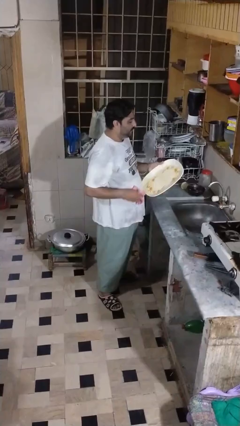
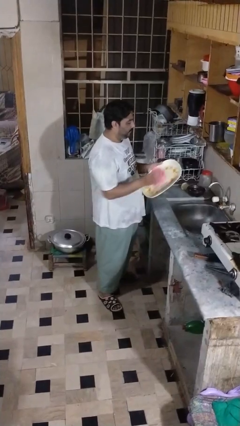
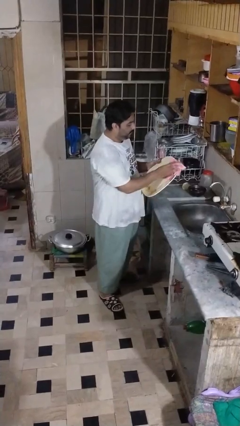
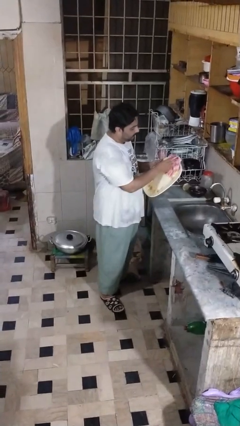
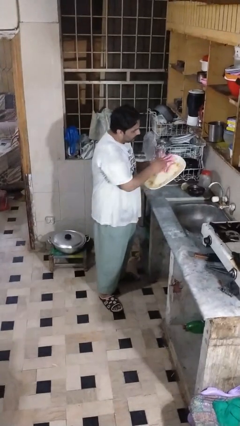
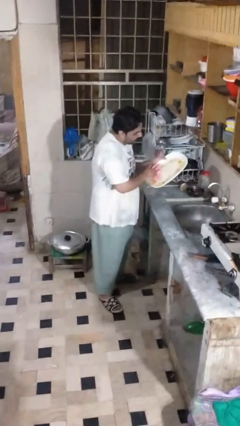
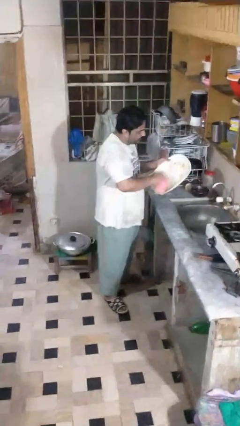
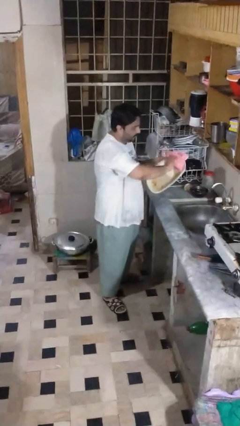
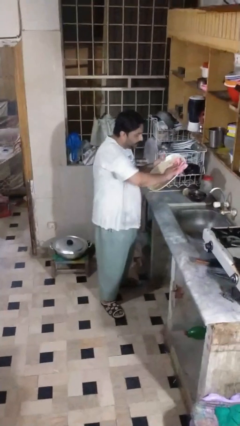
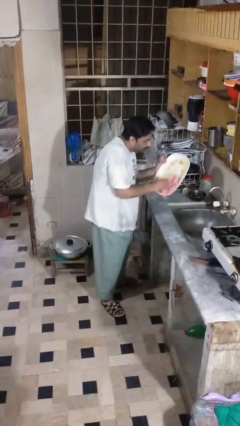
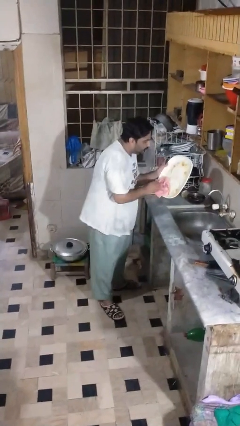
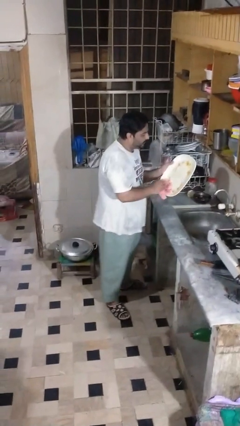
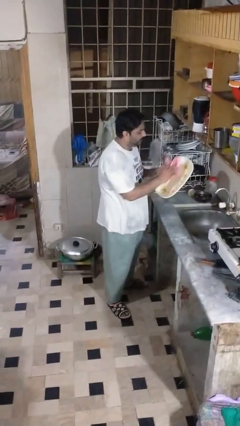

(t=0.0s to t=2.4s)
person dries dish

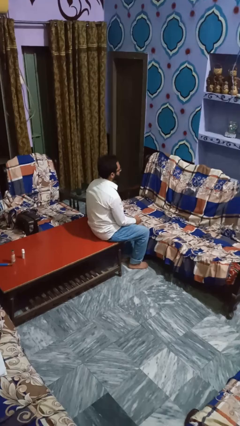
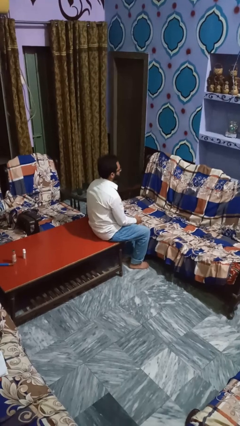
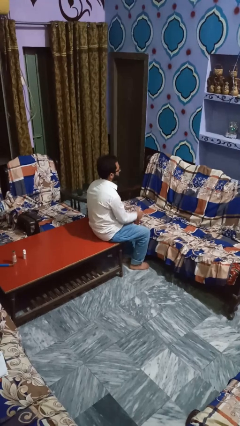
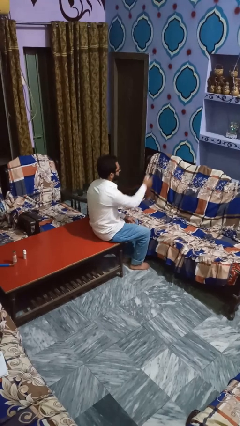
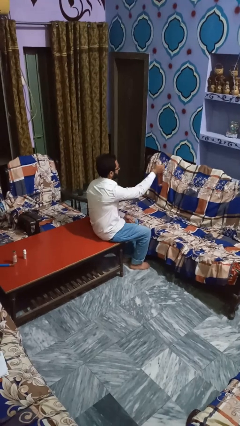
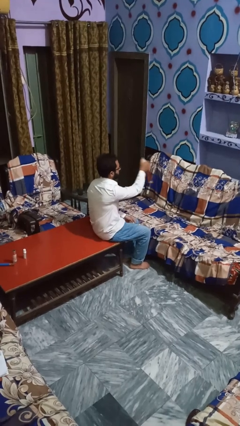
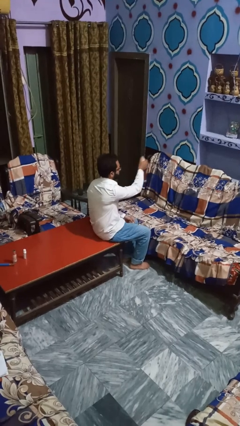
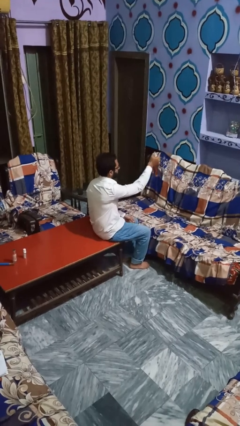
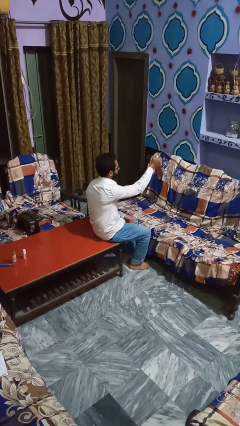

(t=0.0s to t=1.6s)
person sprays from bottle

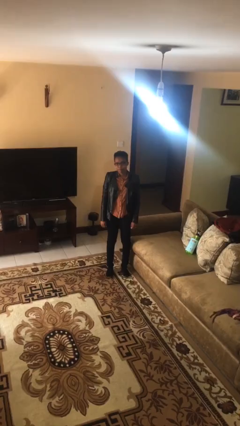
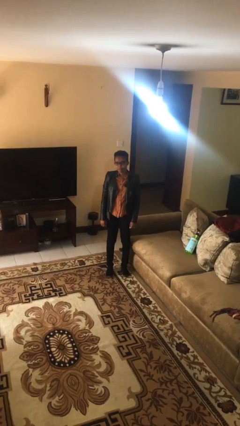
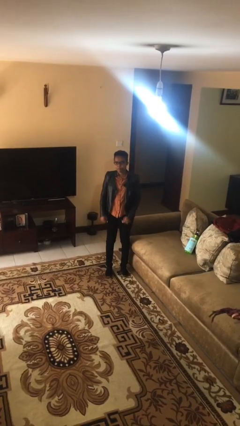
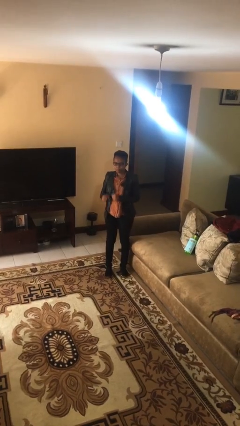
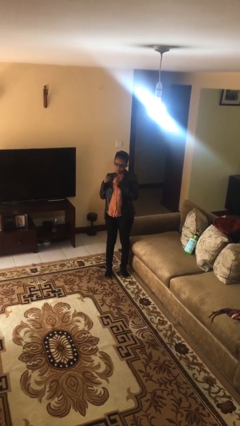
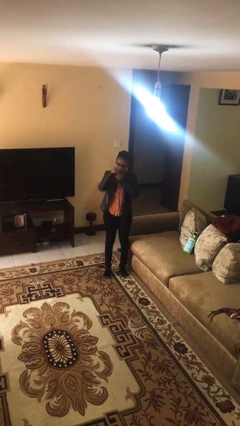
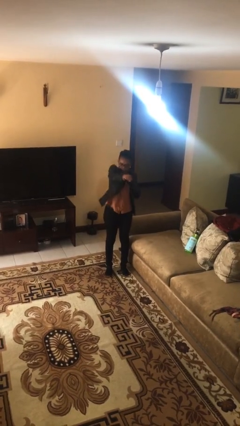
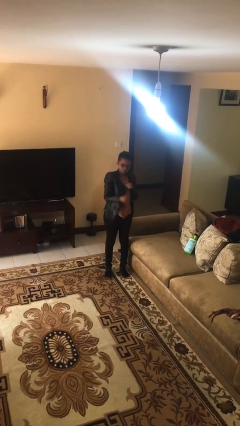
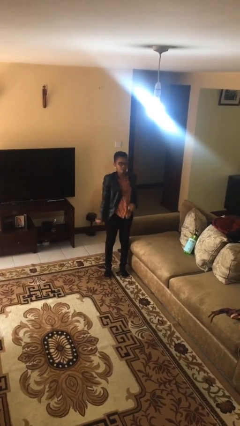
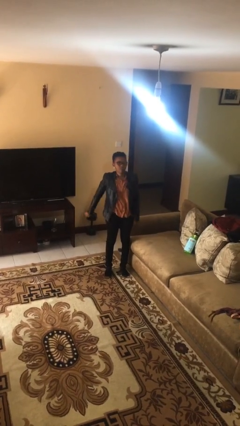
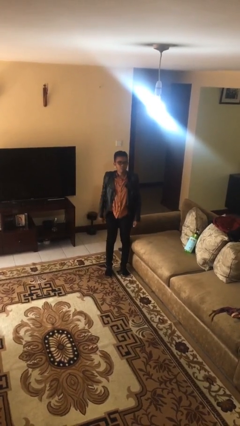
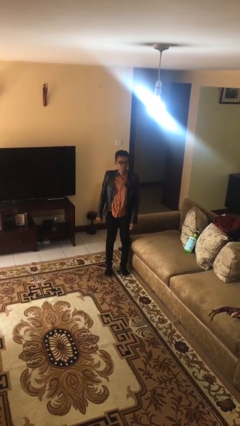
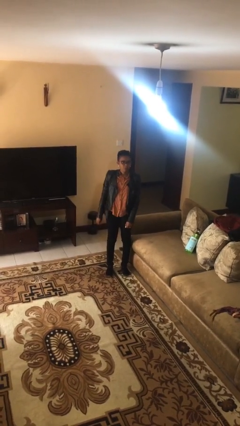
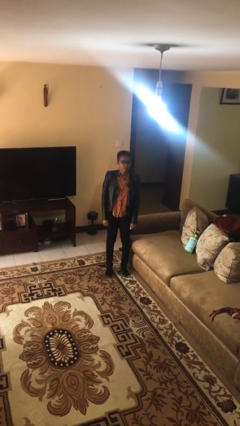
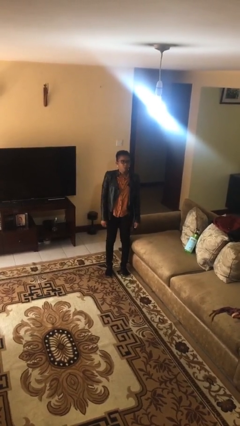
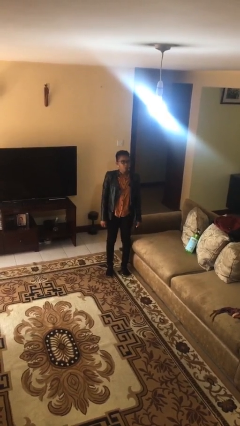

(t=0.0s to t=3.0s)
person punches

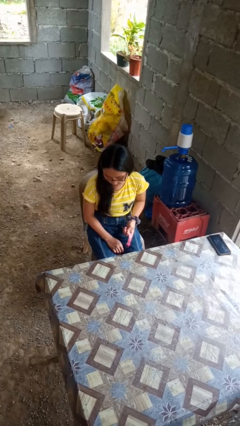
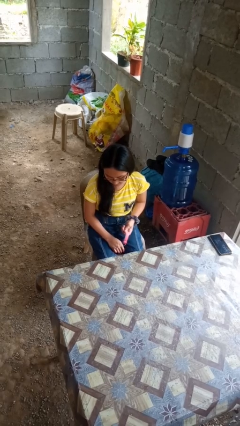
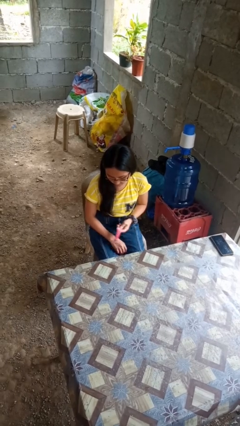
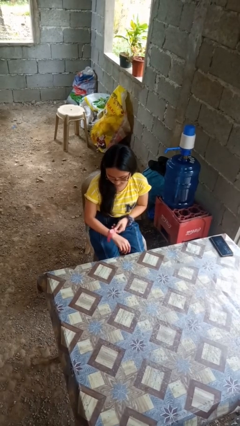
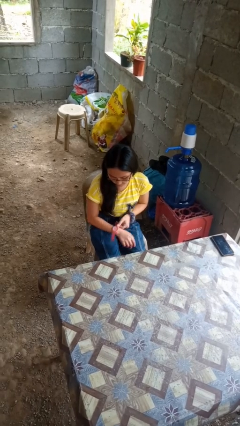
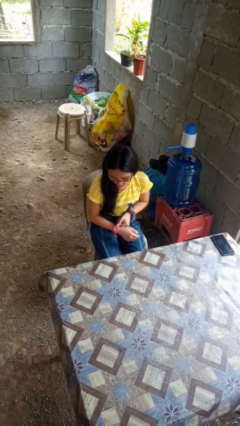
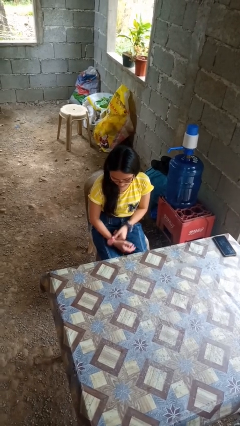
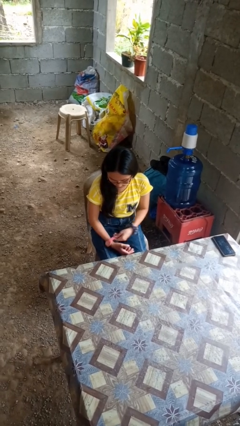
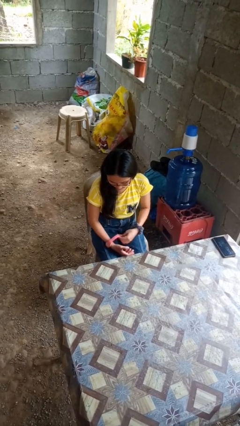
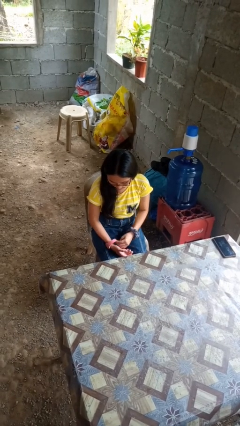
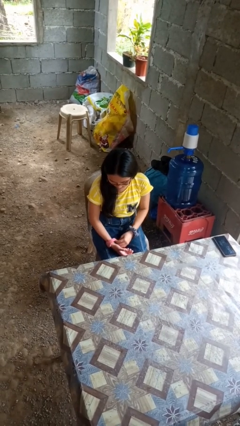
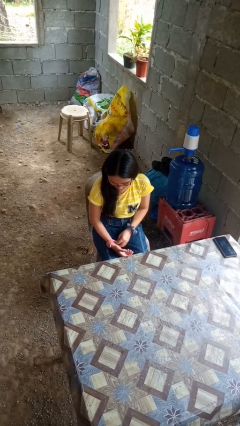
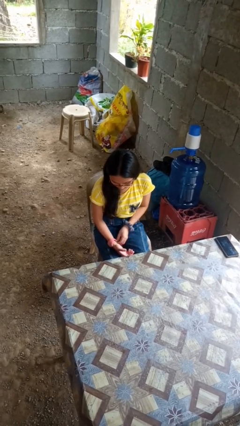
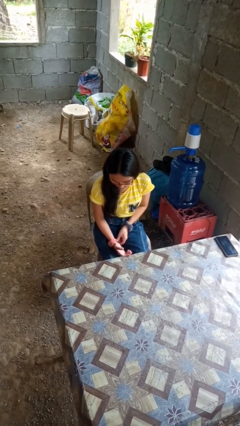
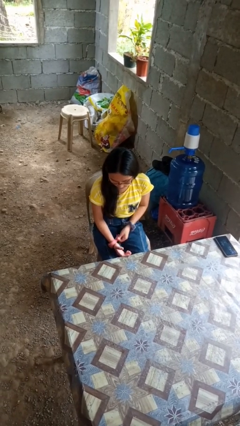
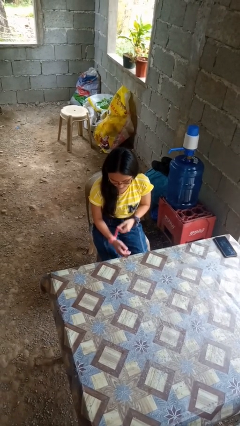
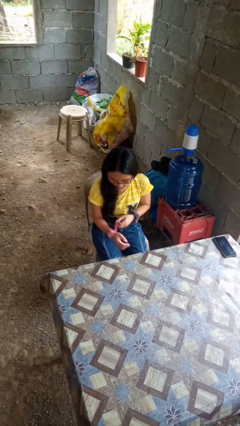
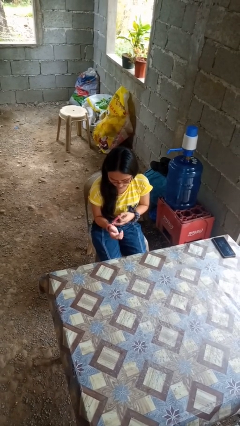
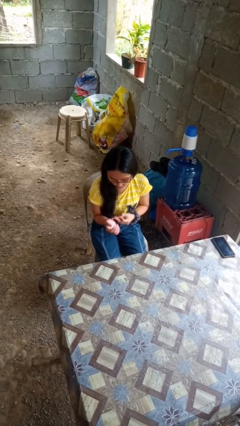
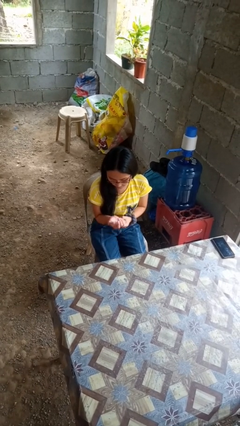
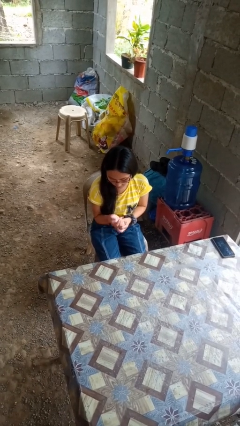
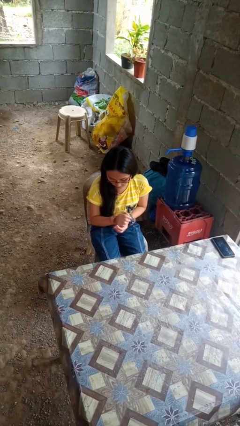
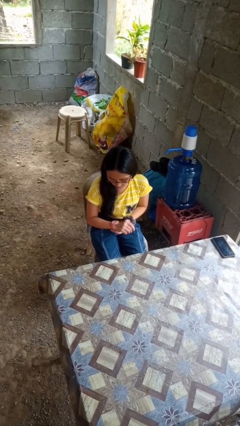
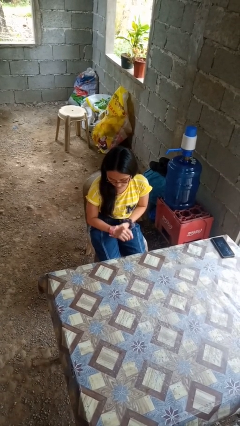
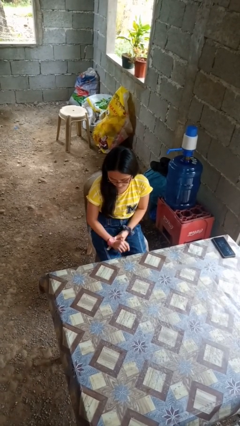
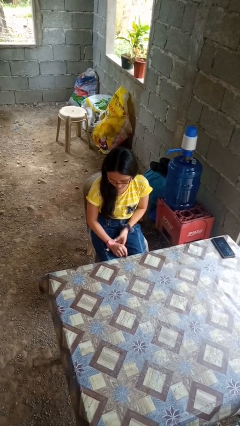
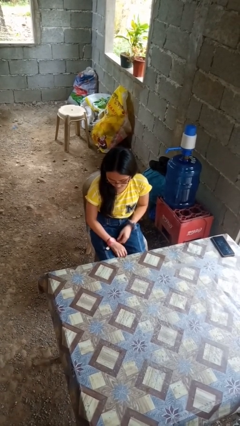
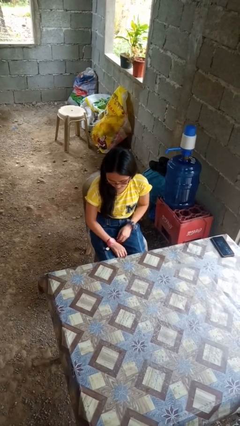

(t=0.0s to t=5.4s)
person puts on wristwatch

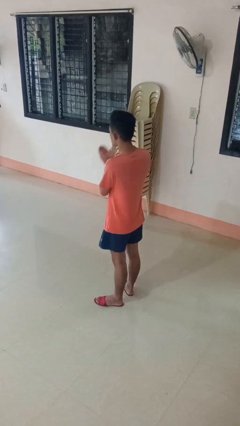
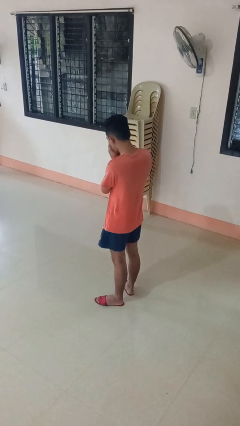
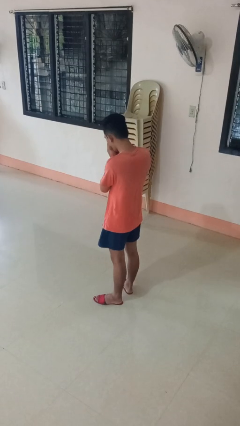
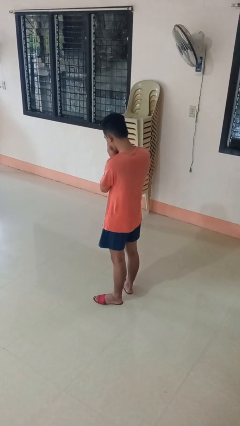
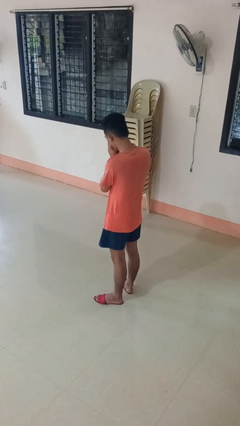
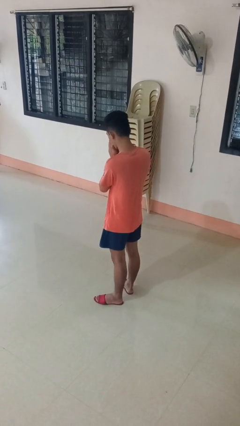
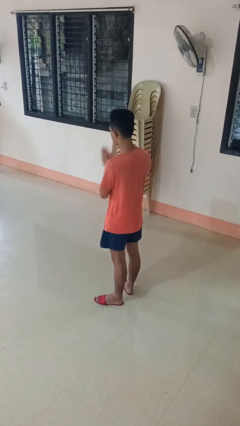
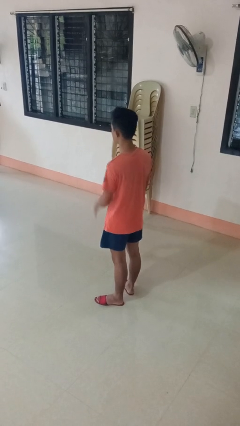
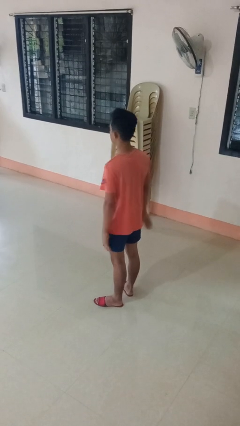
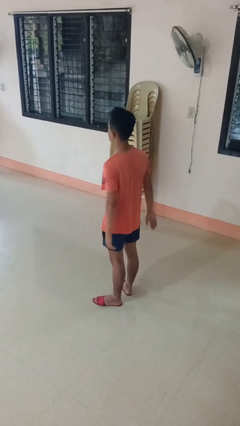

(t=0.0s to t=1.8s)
person shrugs

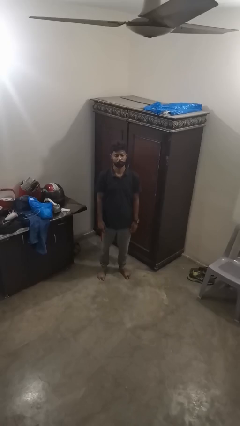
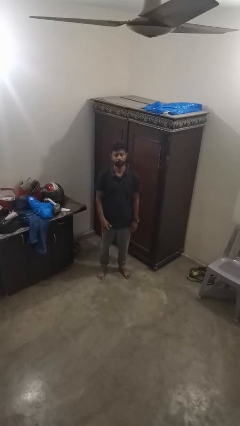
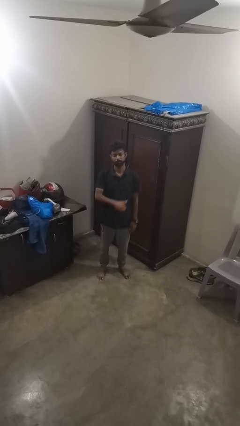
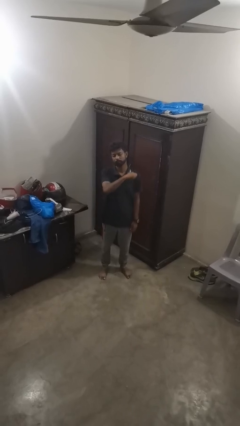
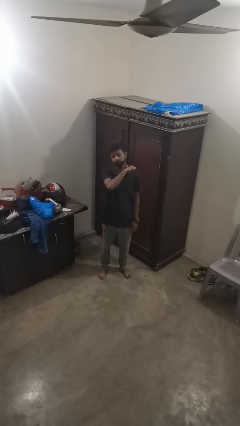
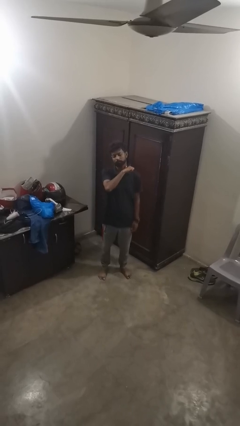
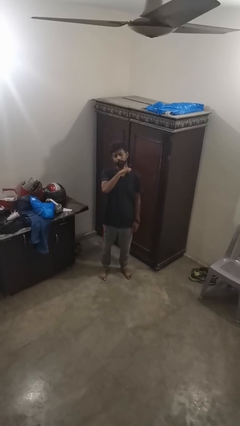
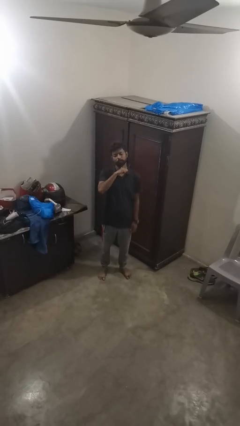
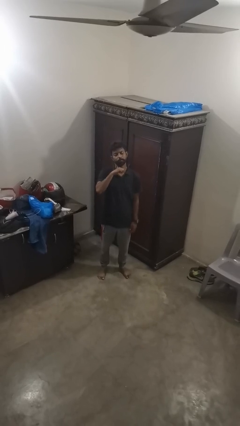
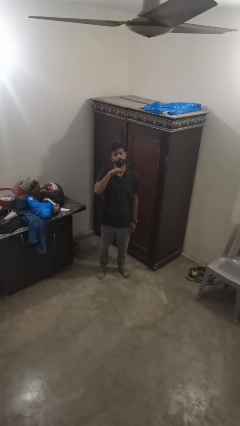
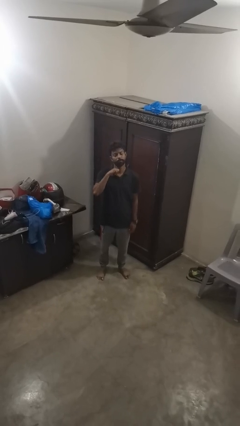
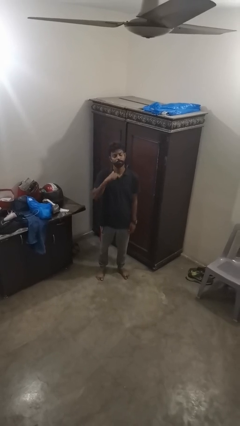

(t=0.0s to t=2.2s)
person gestures cut

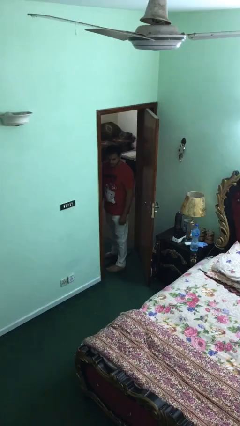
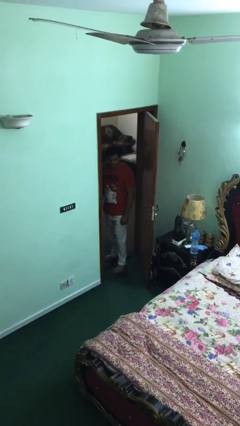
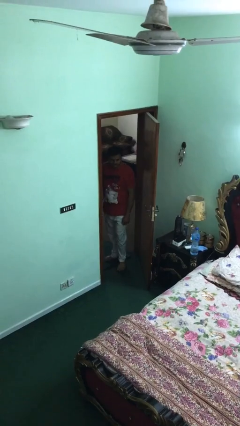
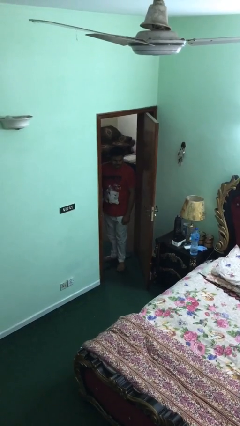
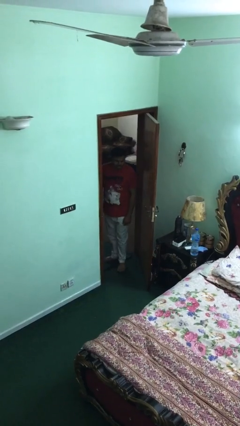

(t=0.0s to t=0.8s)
person closes facility door
